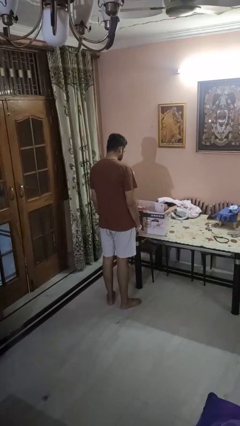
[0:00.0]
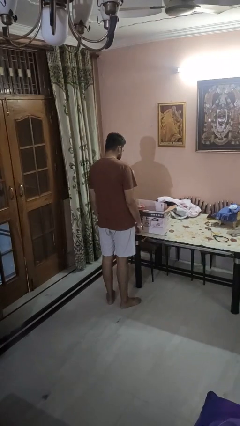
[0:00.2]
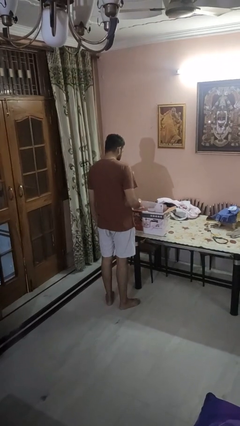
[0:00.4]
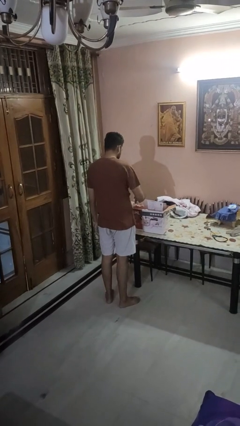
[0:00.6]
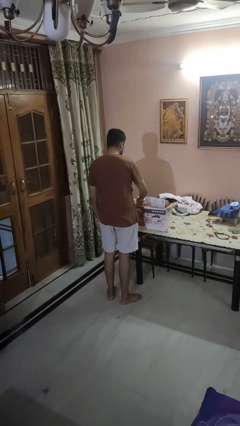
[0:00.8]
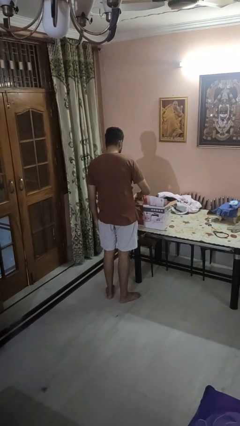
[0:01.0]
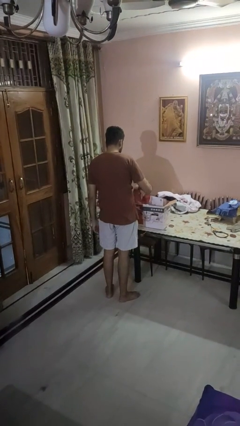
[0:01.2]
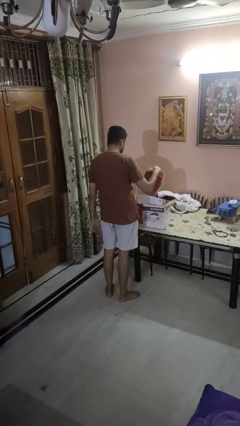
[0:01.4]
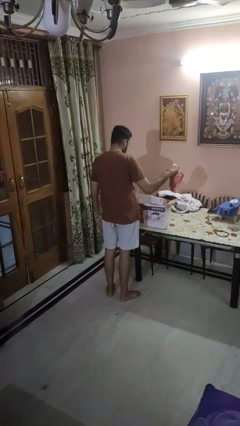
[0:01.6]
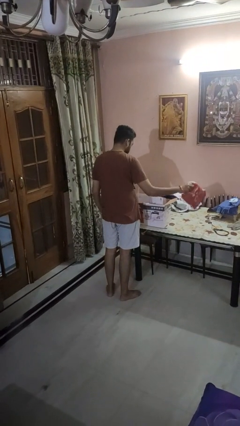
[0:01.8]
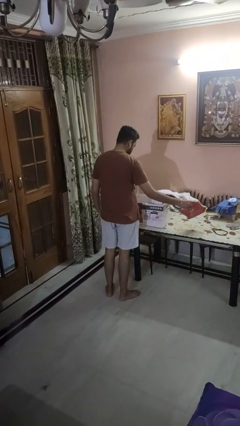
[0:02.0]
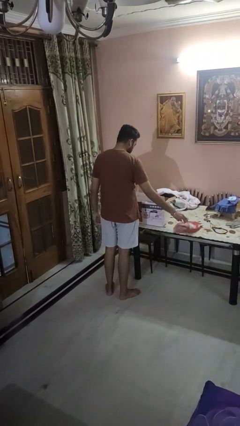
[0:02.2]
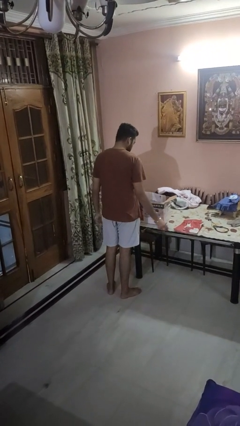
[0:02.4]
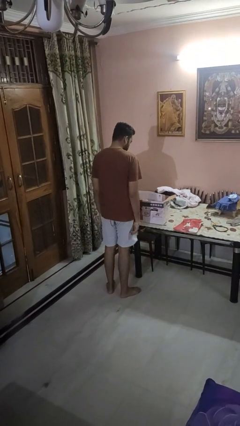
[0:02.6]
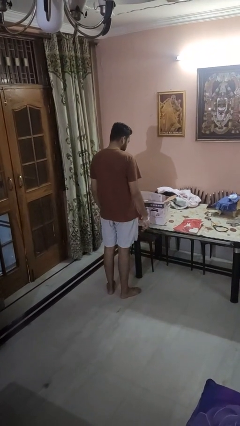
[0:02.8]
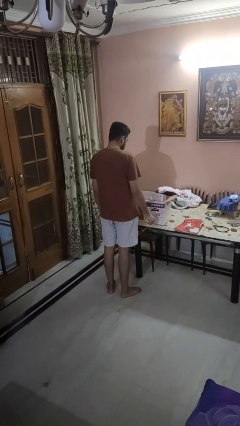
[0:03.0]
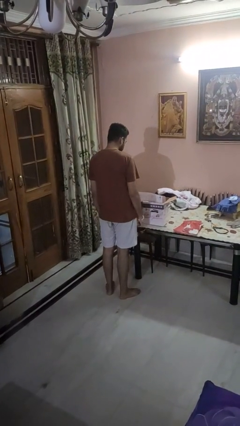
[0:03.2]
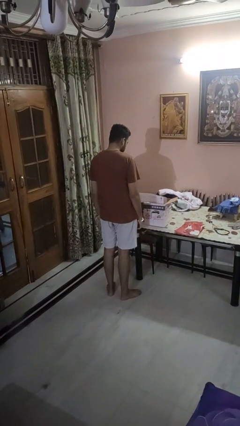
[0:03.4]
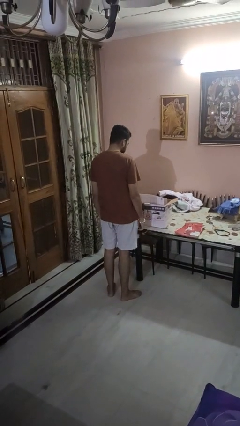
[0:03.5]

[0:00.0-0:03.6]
person takes object from box

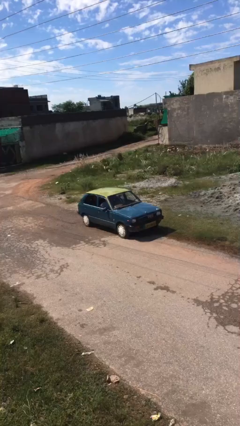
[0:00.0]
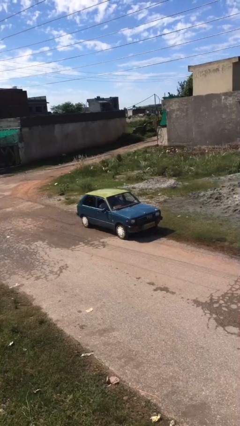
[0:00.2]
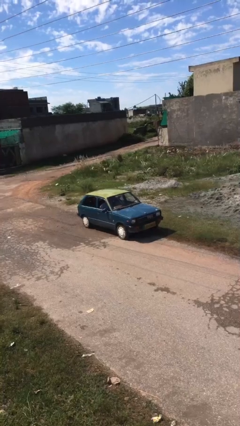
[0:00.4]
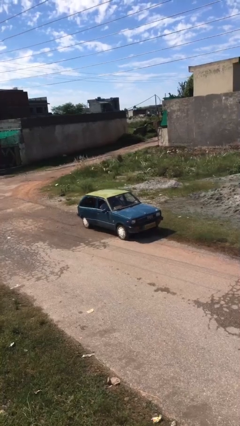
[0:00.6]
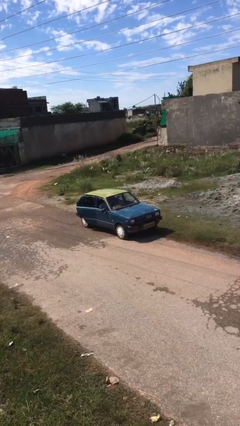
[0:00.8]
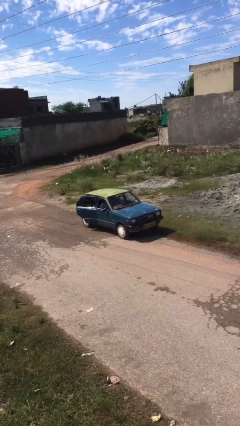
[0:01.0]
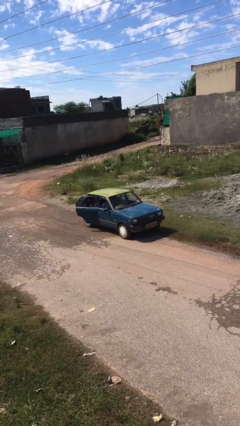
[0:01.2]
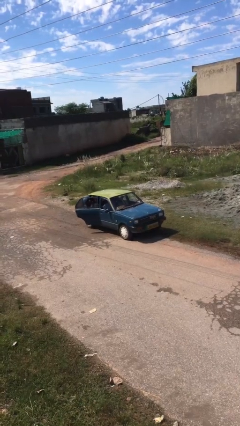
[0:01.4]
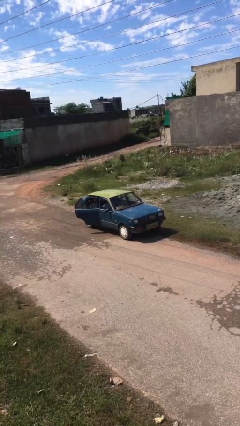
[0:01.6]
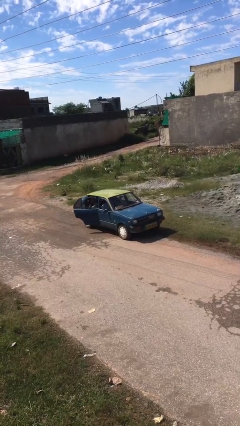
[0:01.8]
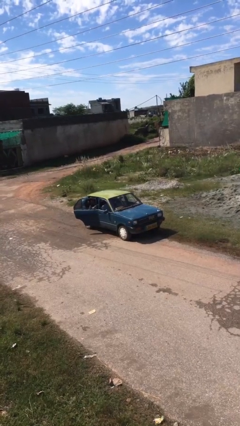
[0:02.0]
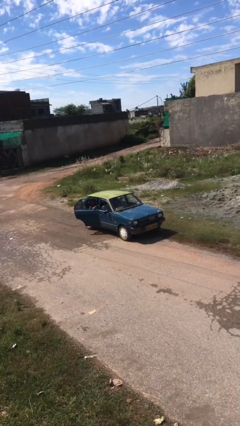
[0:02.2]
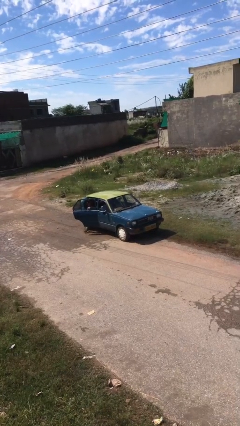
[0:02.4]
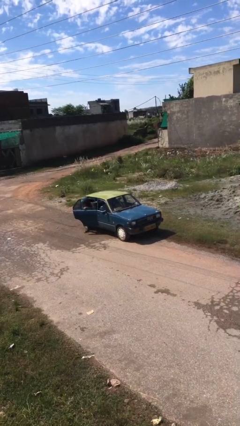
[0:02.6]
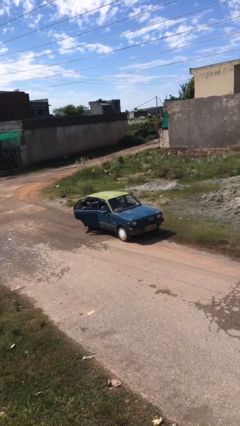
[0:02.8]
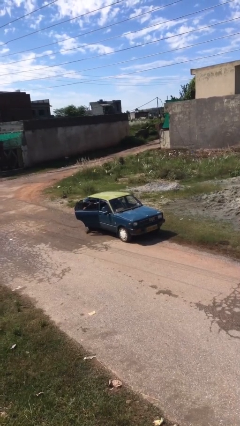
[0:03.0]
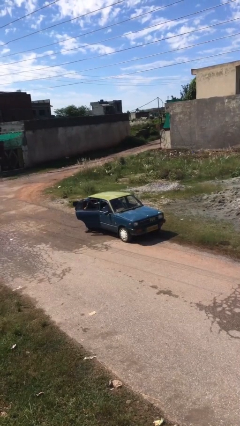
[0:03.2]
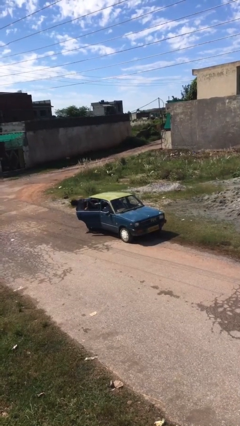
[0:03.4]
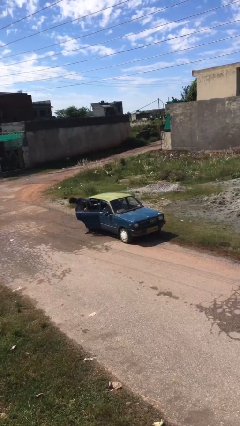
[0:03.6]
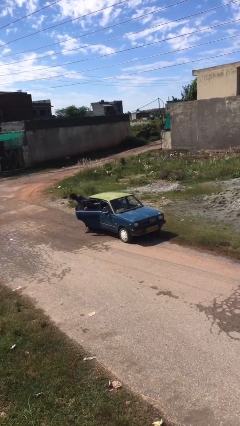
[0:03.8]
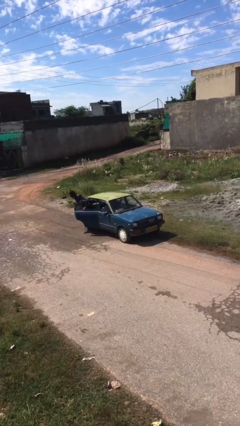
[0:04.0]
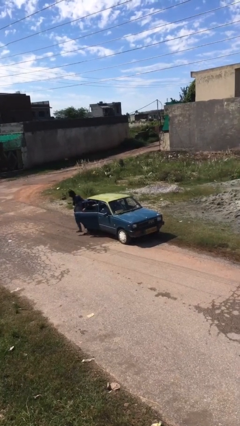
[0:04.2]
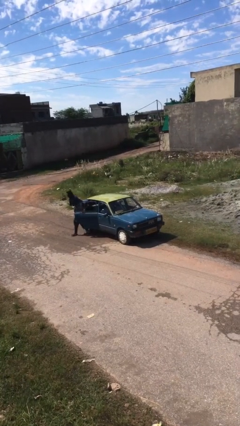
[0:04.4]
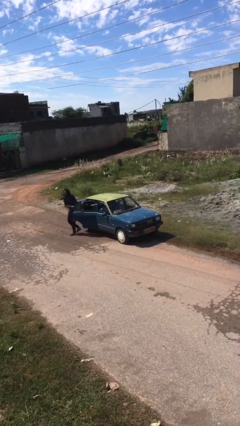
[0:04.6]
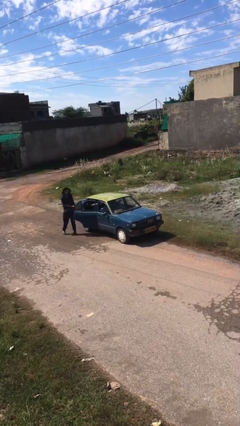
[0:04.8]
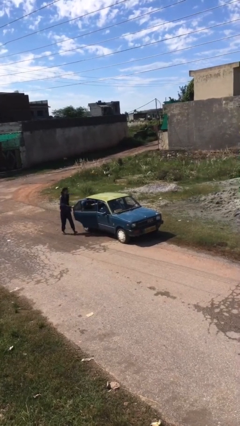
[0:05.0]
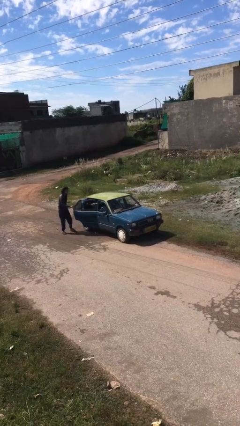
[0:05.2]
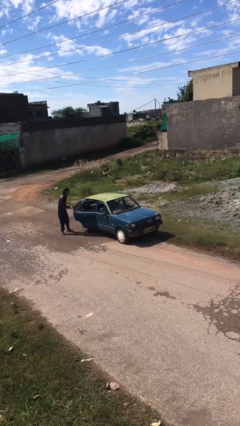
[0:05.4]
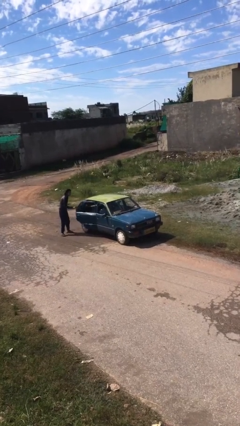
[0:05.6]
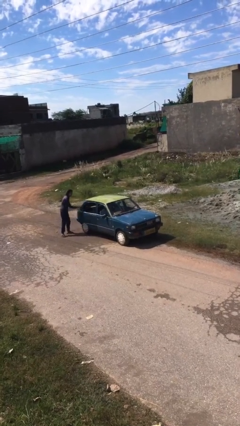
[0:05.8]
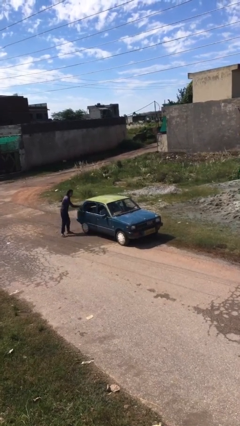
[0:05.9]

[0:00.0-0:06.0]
car drops off person

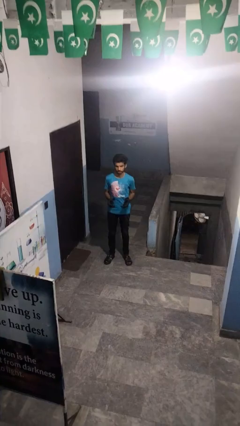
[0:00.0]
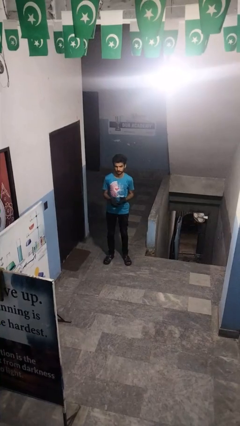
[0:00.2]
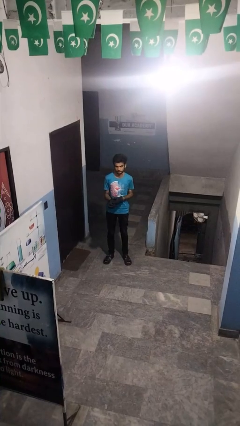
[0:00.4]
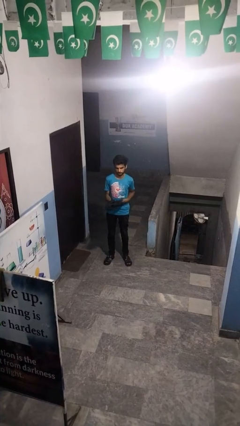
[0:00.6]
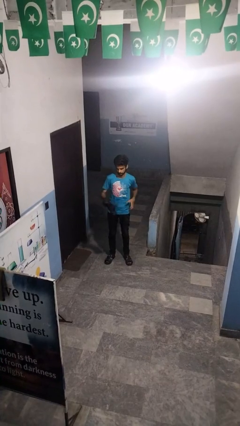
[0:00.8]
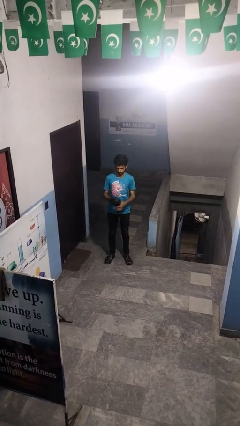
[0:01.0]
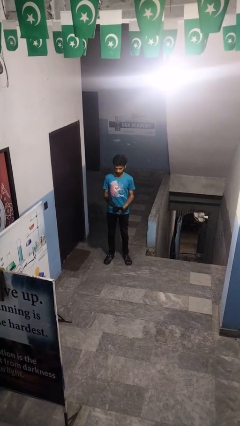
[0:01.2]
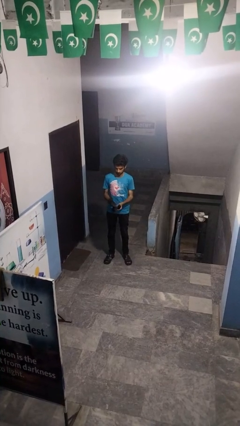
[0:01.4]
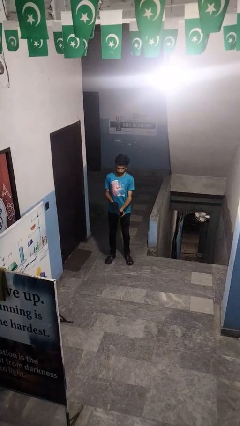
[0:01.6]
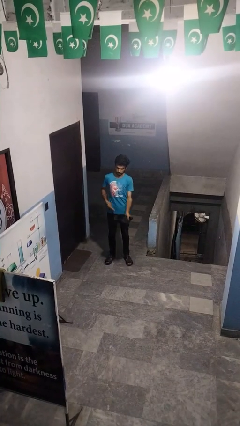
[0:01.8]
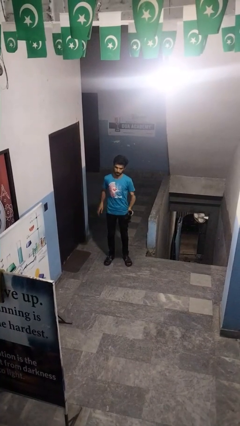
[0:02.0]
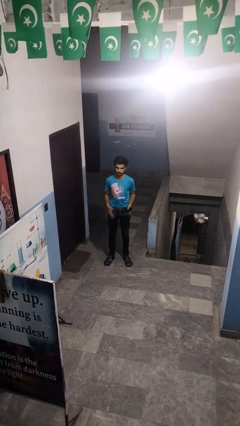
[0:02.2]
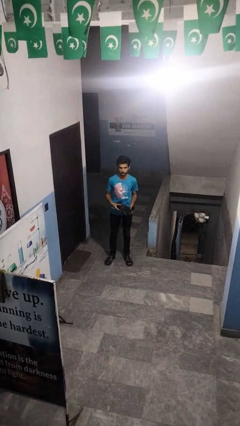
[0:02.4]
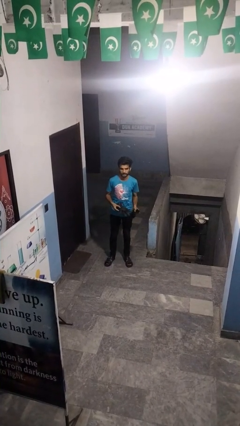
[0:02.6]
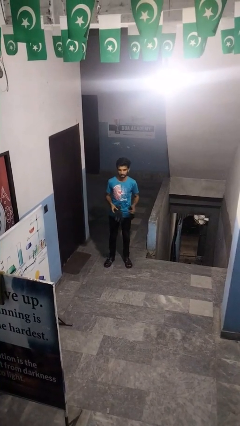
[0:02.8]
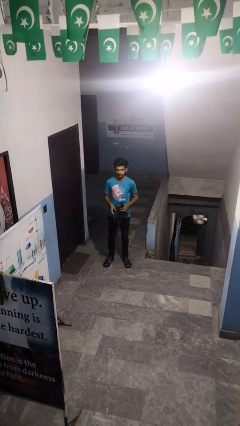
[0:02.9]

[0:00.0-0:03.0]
person takes off gloves

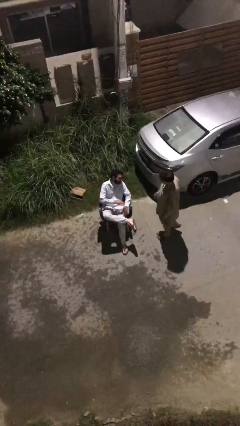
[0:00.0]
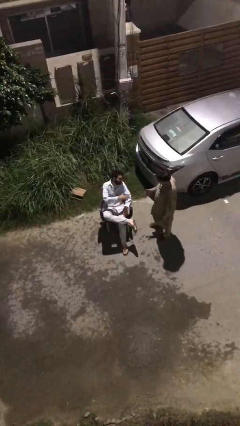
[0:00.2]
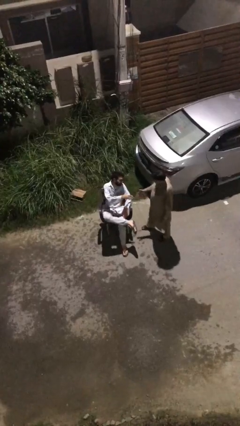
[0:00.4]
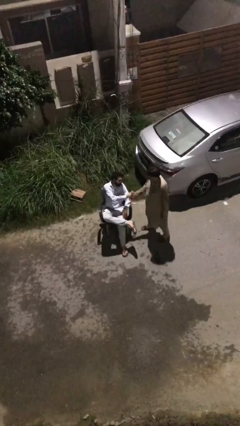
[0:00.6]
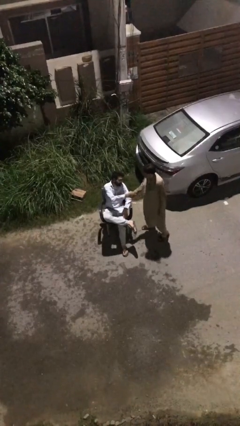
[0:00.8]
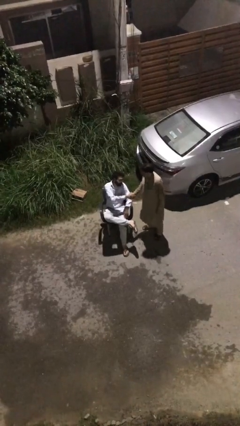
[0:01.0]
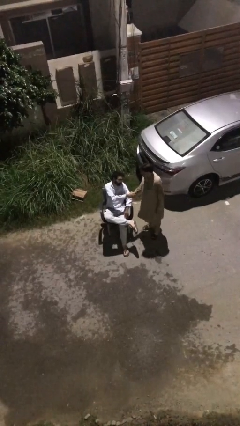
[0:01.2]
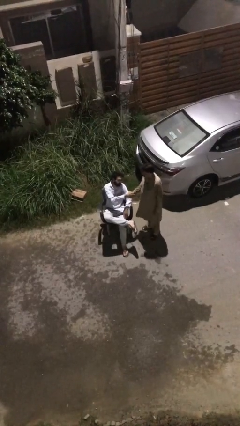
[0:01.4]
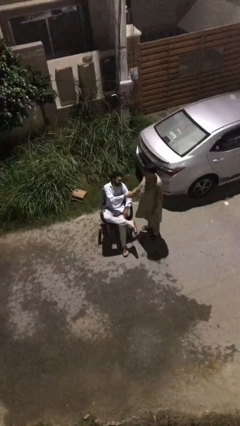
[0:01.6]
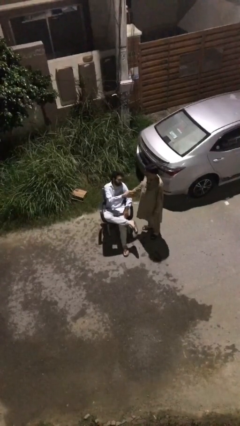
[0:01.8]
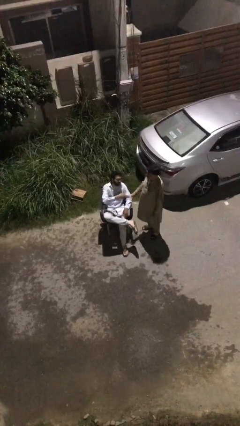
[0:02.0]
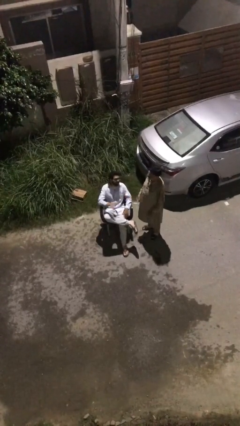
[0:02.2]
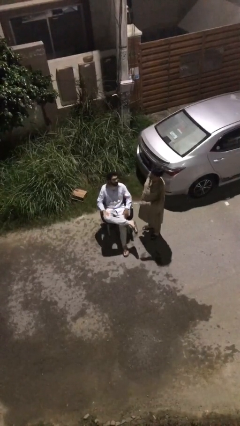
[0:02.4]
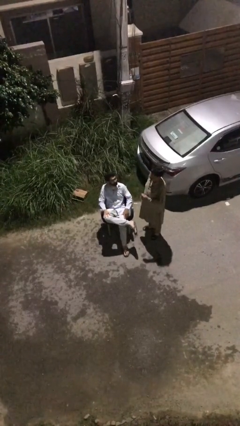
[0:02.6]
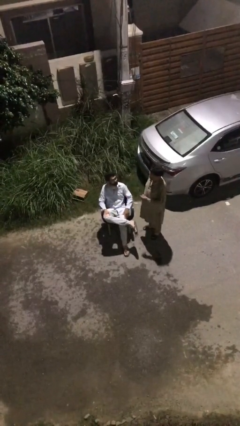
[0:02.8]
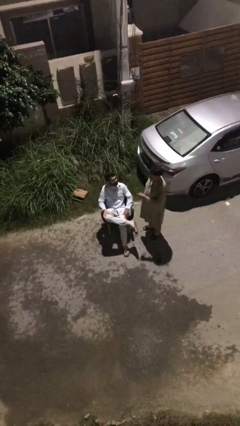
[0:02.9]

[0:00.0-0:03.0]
person shakes hand

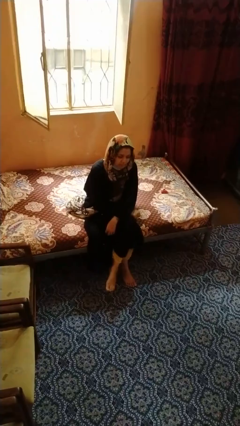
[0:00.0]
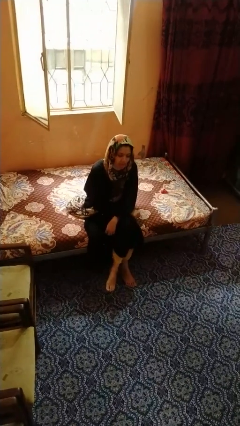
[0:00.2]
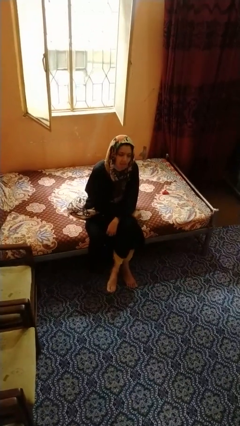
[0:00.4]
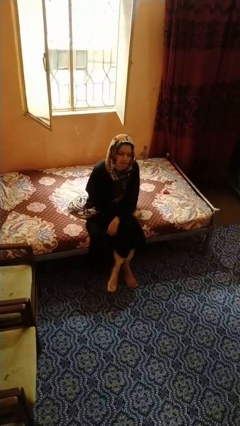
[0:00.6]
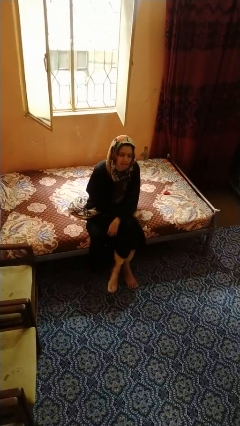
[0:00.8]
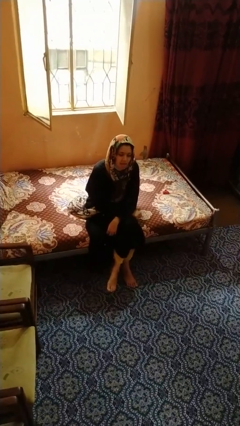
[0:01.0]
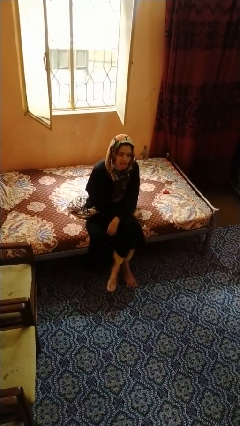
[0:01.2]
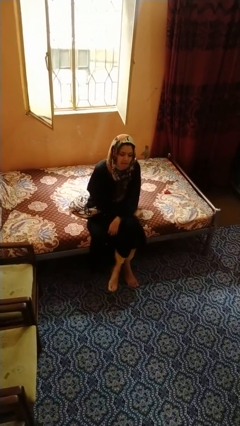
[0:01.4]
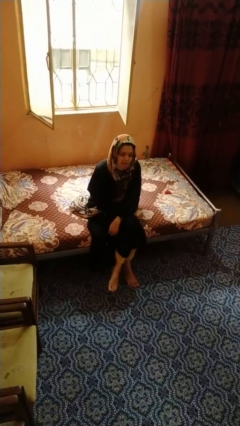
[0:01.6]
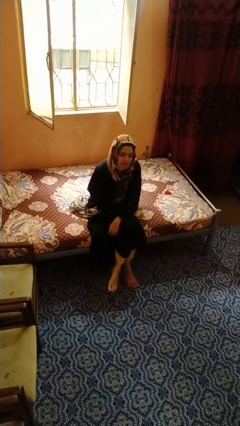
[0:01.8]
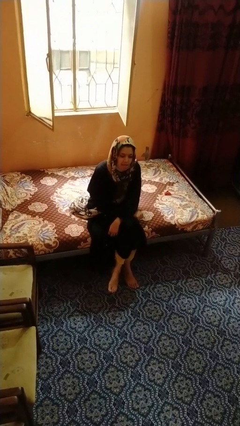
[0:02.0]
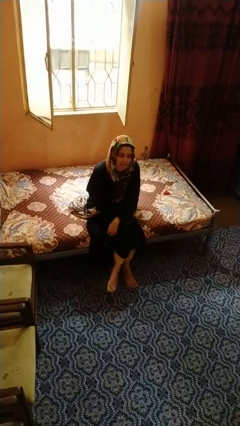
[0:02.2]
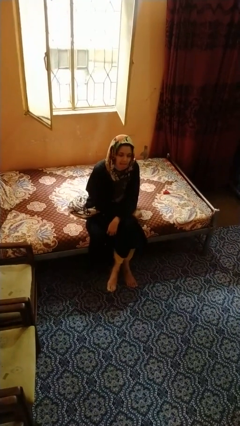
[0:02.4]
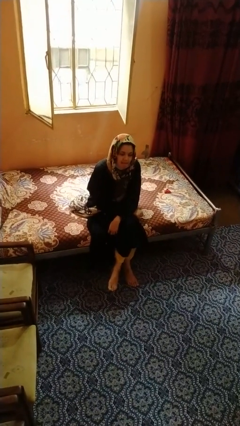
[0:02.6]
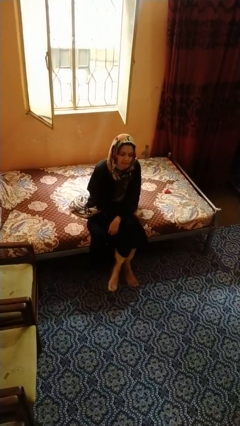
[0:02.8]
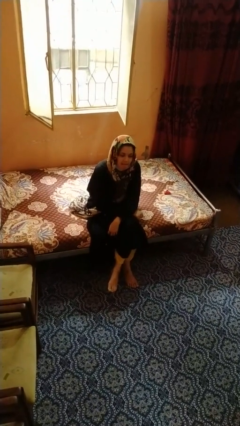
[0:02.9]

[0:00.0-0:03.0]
person sticks out tongue
